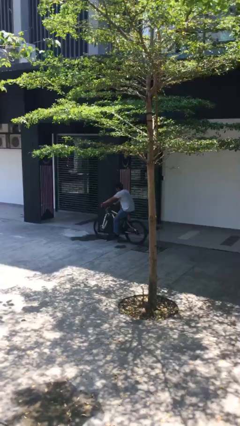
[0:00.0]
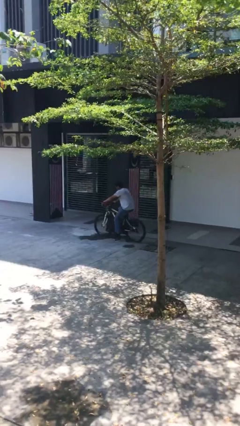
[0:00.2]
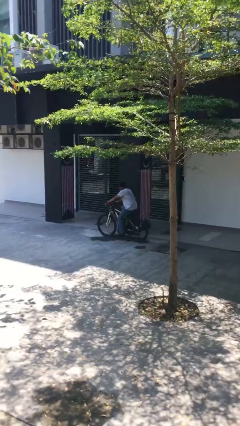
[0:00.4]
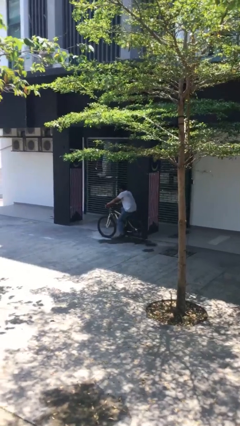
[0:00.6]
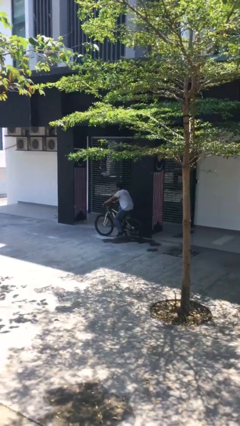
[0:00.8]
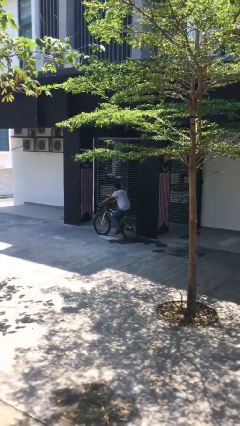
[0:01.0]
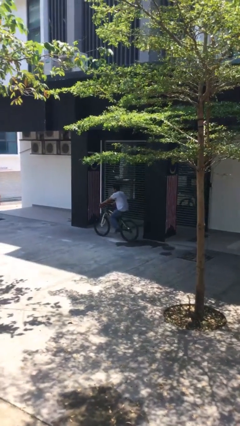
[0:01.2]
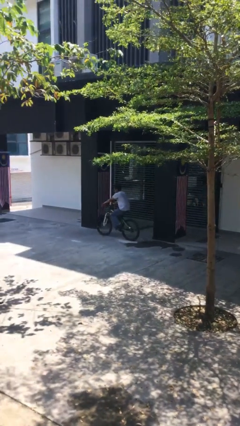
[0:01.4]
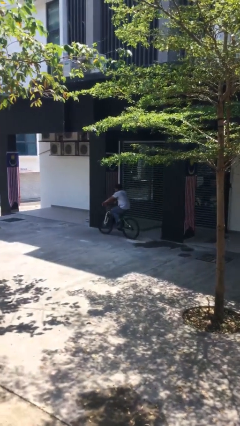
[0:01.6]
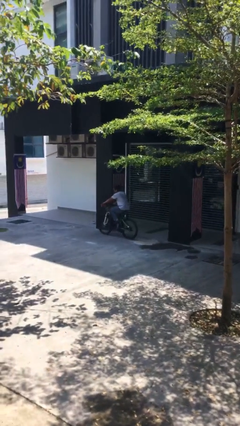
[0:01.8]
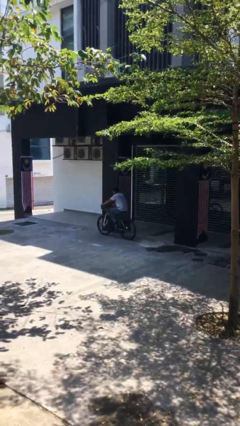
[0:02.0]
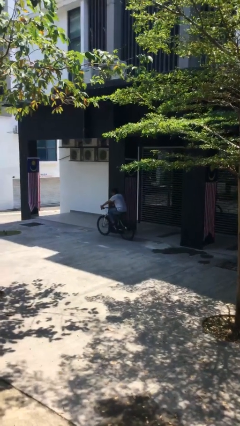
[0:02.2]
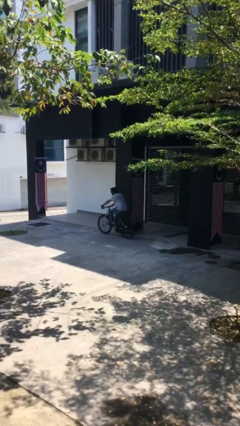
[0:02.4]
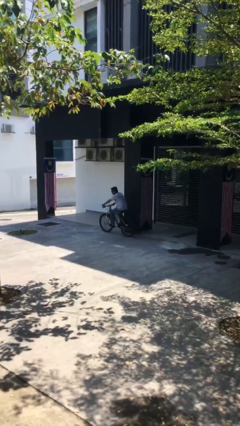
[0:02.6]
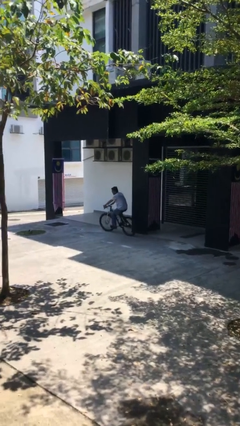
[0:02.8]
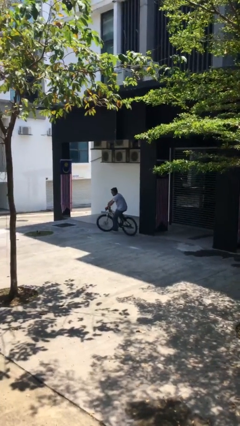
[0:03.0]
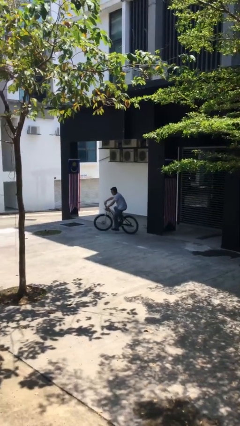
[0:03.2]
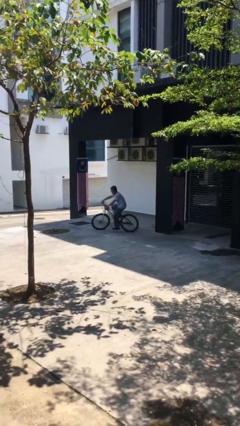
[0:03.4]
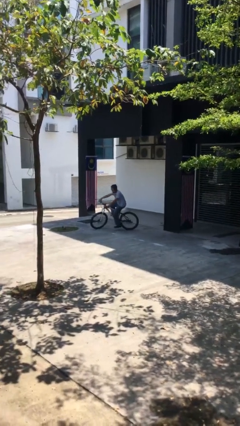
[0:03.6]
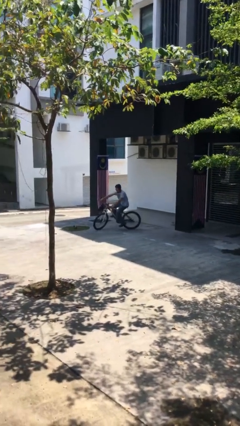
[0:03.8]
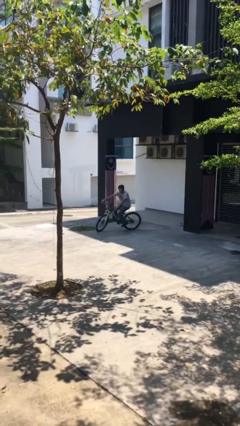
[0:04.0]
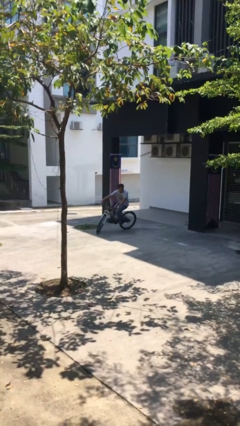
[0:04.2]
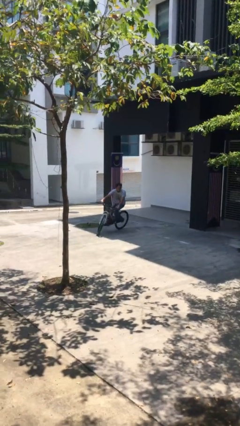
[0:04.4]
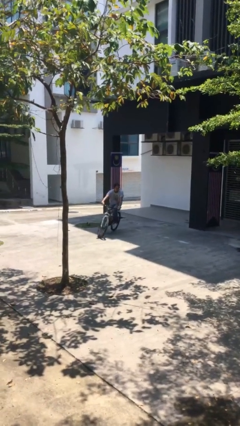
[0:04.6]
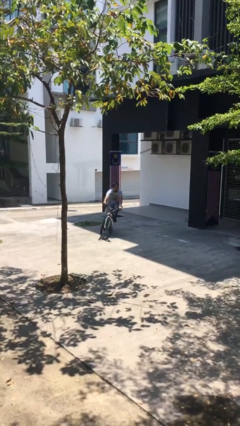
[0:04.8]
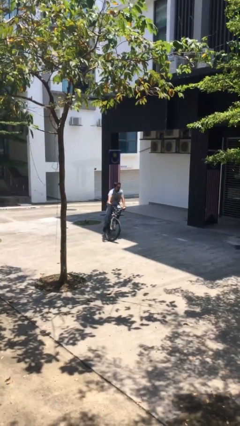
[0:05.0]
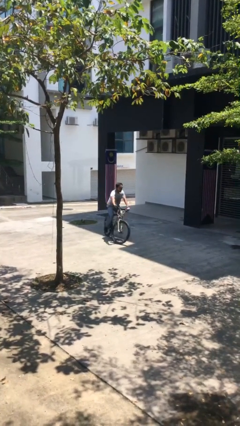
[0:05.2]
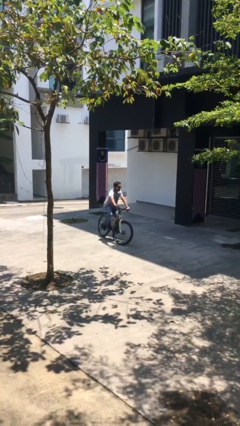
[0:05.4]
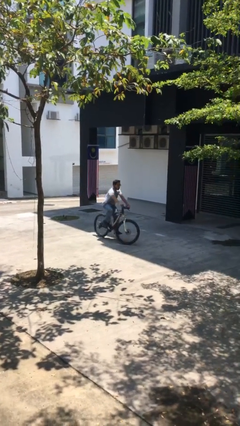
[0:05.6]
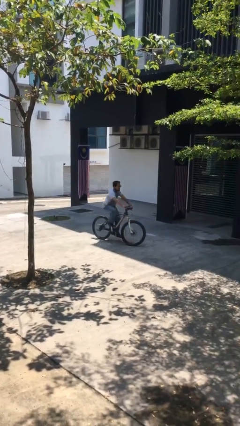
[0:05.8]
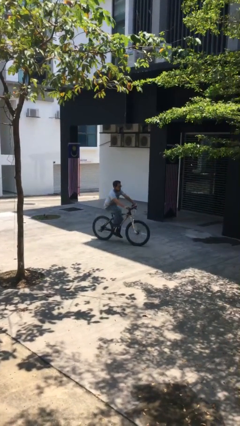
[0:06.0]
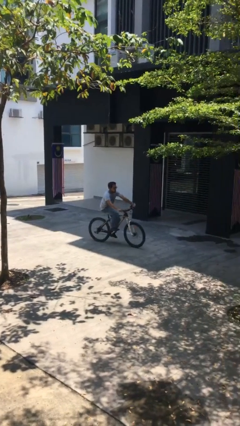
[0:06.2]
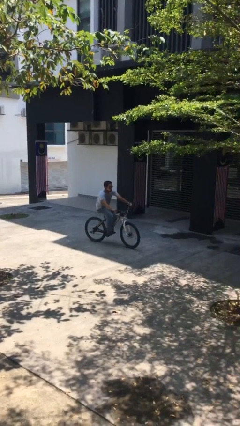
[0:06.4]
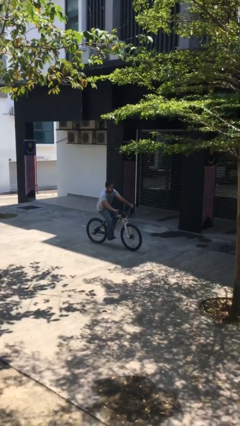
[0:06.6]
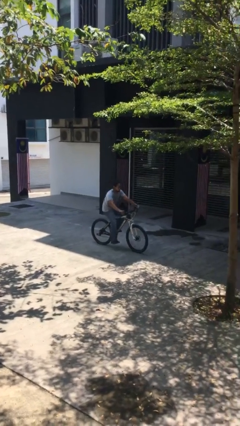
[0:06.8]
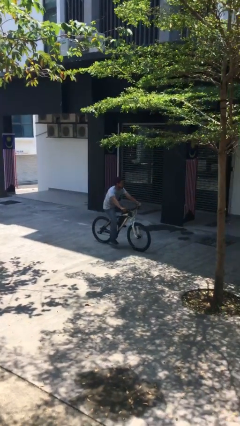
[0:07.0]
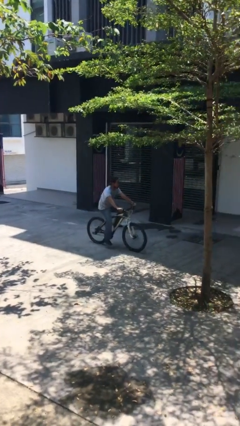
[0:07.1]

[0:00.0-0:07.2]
person rides bicycle

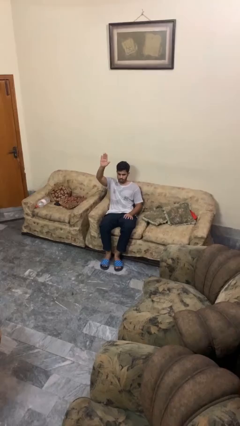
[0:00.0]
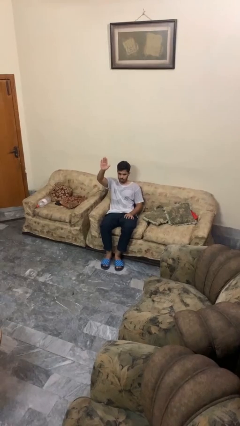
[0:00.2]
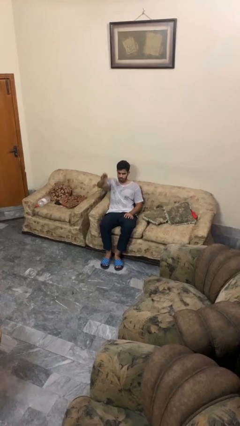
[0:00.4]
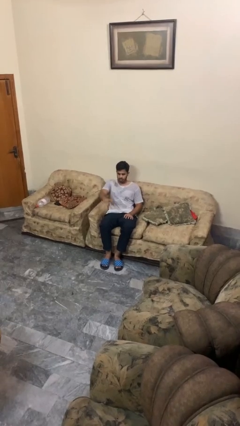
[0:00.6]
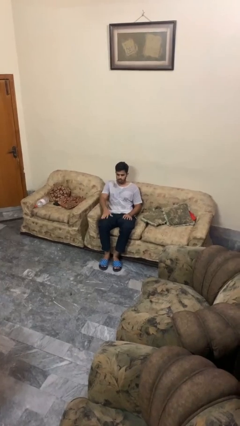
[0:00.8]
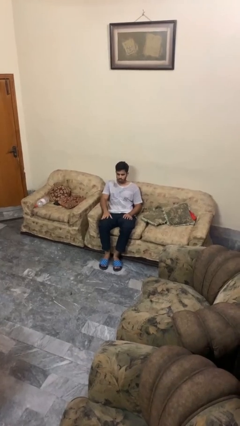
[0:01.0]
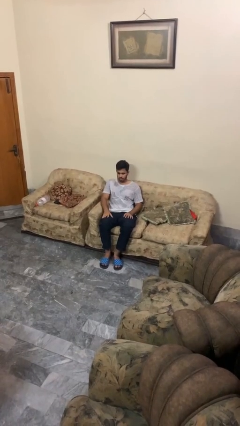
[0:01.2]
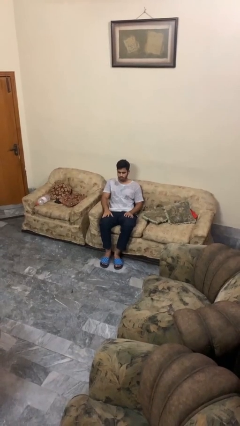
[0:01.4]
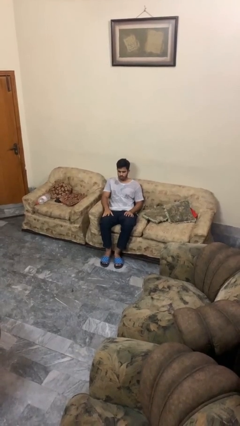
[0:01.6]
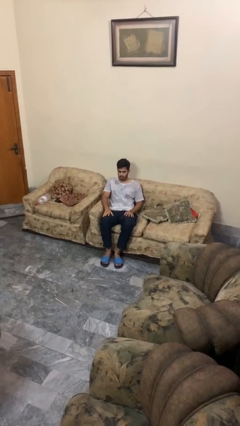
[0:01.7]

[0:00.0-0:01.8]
person gestures lower hand

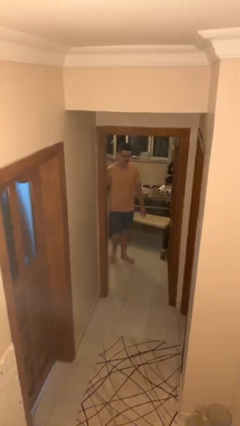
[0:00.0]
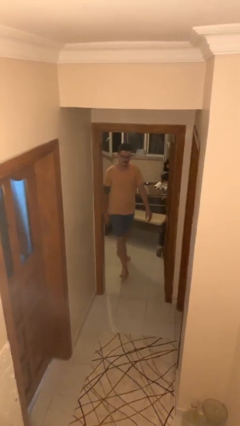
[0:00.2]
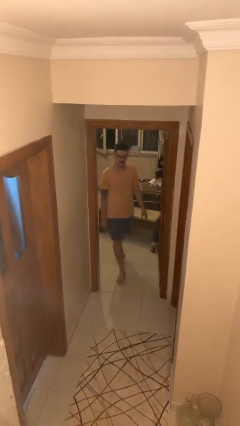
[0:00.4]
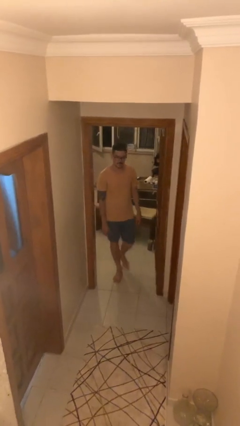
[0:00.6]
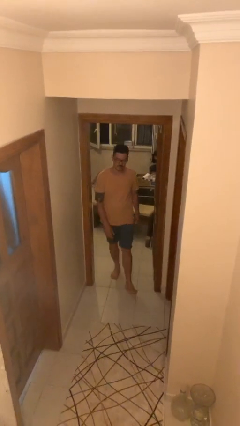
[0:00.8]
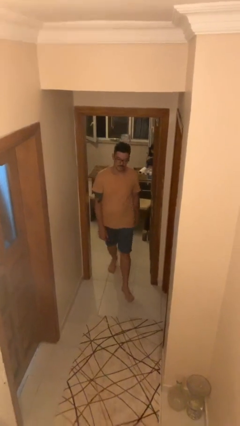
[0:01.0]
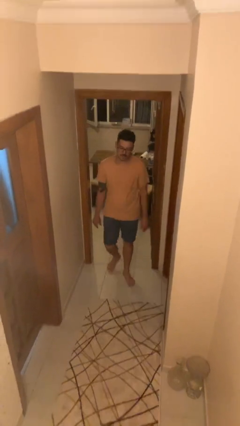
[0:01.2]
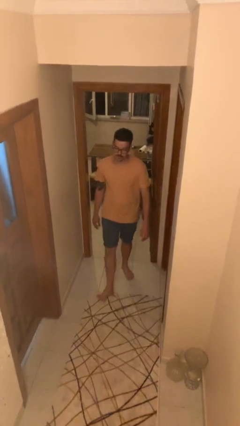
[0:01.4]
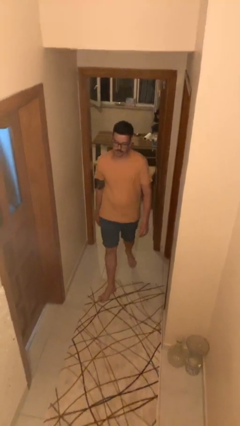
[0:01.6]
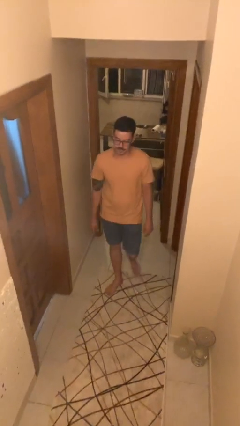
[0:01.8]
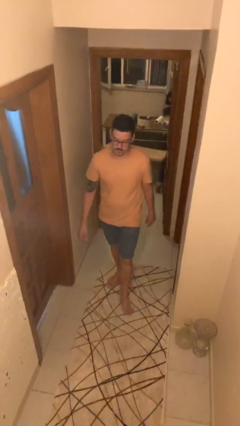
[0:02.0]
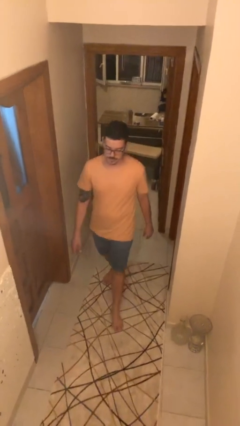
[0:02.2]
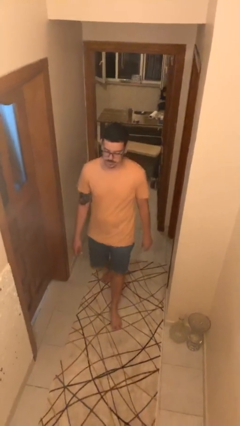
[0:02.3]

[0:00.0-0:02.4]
person enters scene through structure

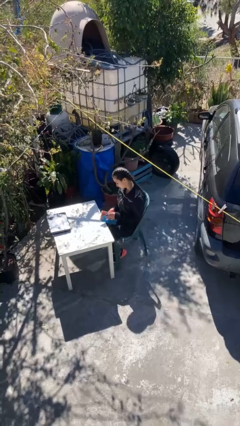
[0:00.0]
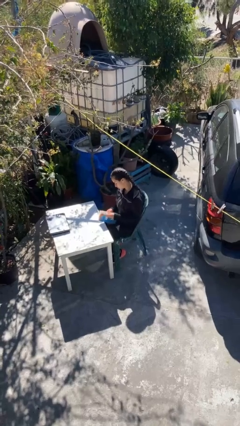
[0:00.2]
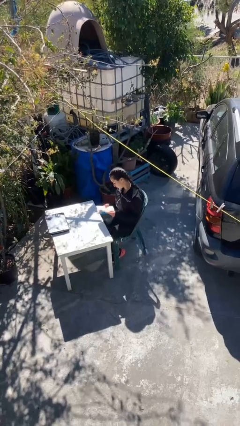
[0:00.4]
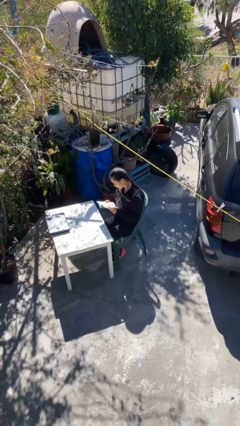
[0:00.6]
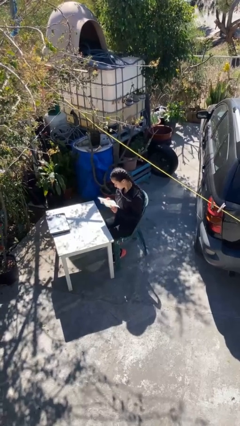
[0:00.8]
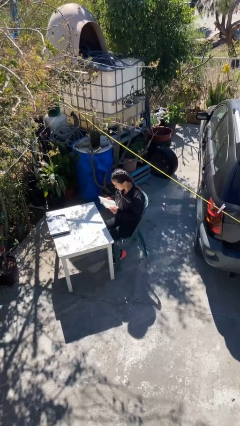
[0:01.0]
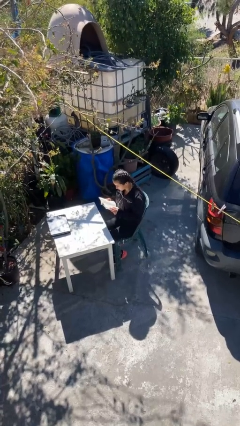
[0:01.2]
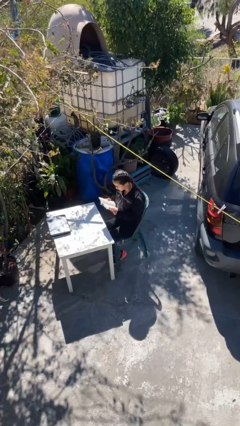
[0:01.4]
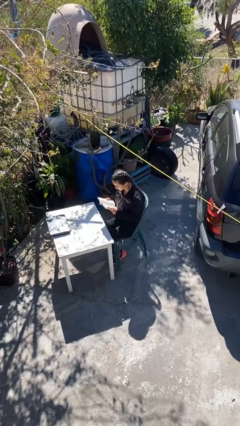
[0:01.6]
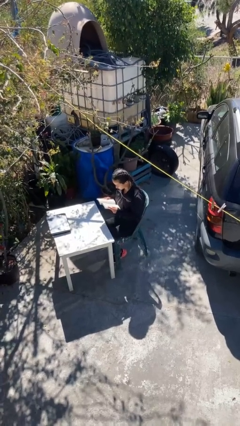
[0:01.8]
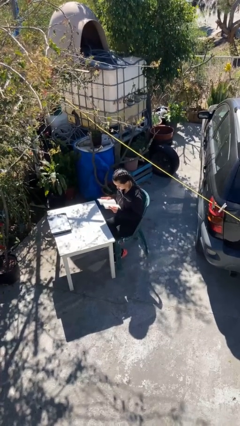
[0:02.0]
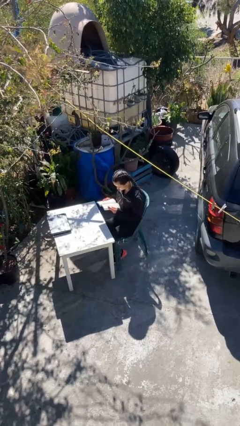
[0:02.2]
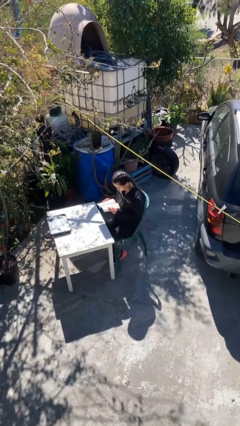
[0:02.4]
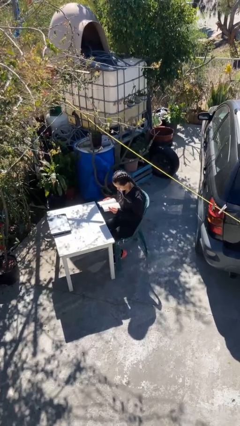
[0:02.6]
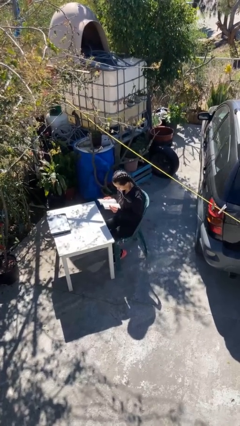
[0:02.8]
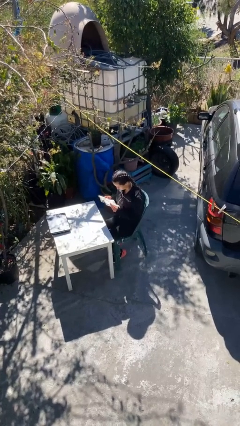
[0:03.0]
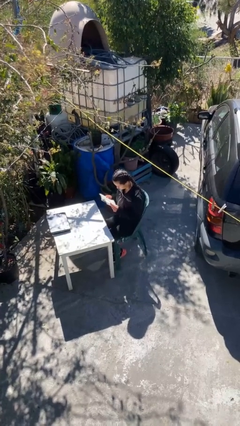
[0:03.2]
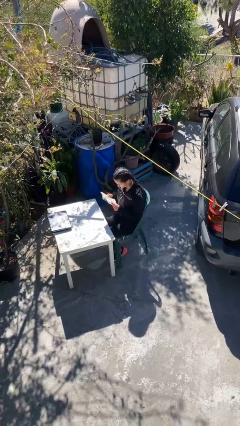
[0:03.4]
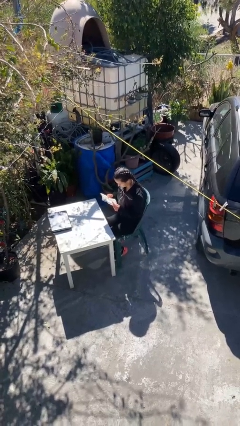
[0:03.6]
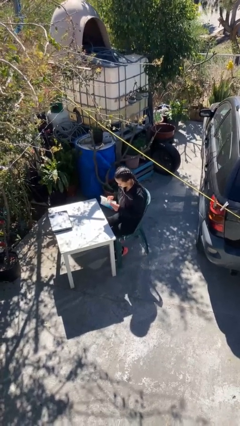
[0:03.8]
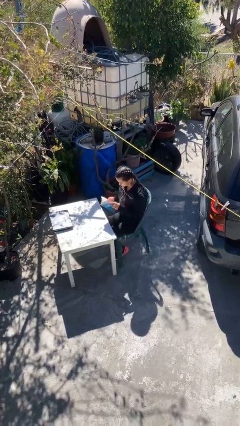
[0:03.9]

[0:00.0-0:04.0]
person reads document

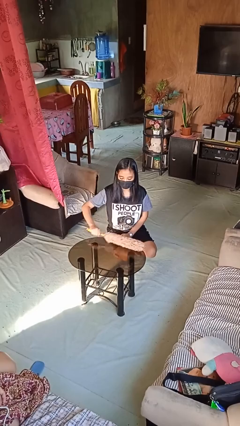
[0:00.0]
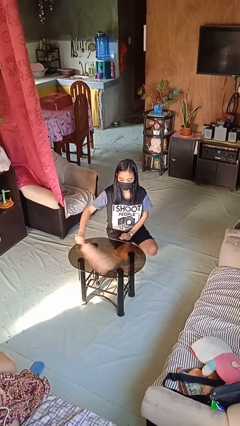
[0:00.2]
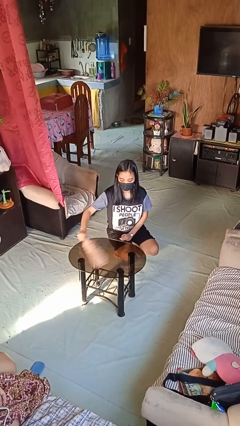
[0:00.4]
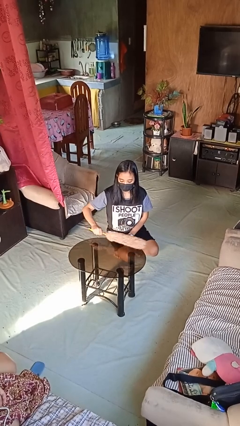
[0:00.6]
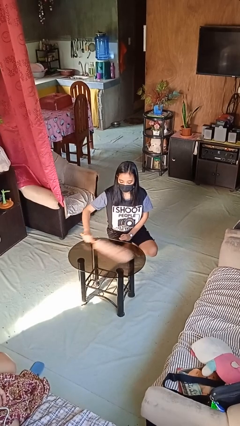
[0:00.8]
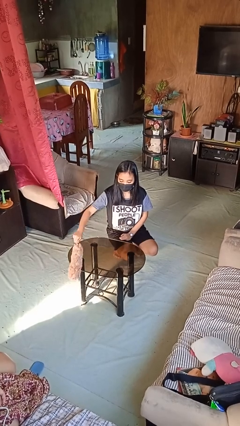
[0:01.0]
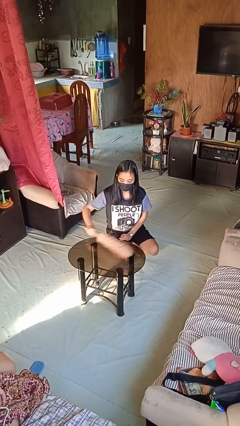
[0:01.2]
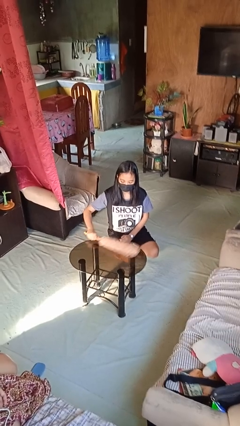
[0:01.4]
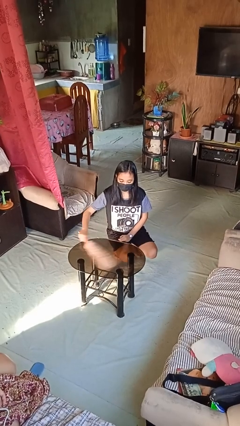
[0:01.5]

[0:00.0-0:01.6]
person dusts furniture

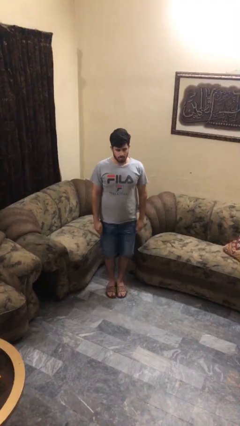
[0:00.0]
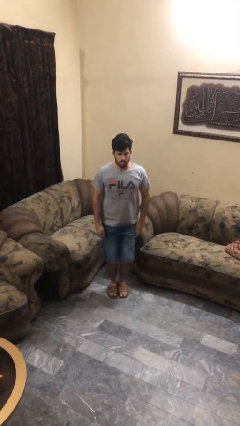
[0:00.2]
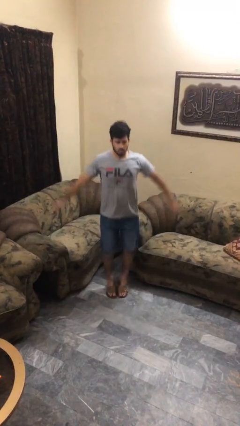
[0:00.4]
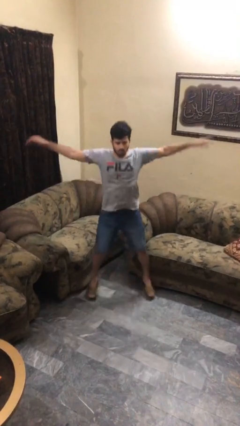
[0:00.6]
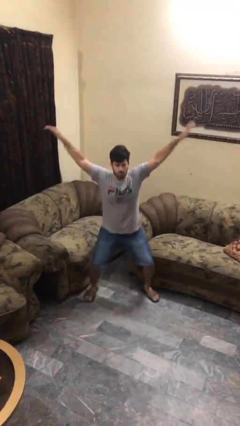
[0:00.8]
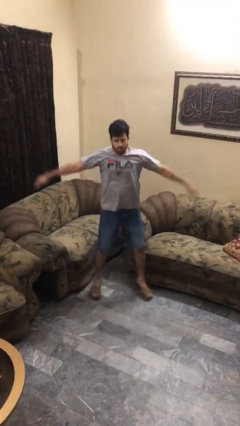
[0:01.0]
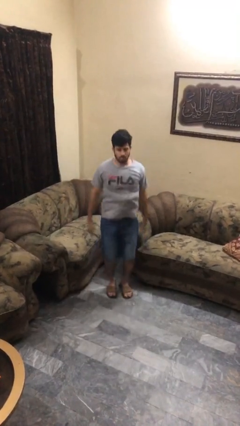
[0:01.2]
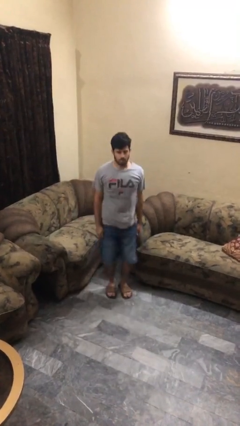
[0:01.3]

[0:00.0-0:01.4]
person exercises with jumping jacks
